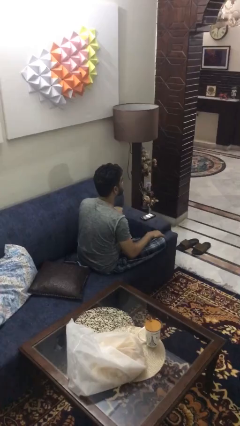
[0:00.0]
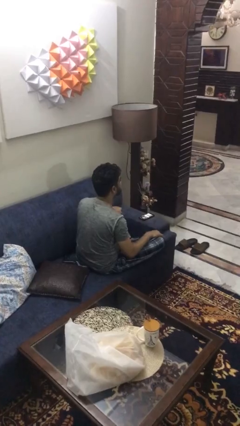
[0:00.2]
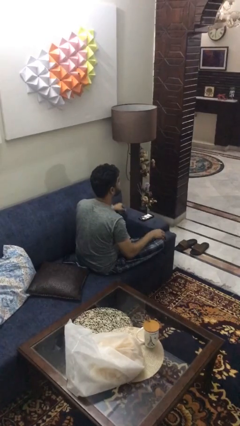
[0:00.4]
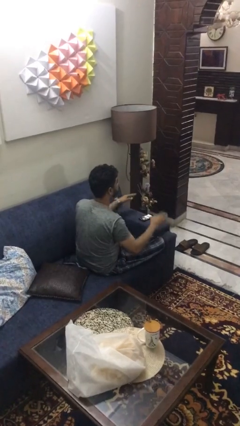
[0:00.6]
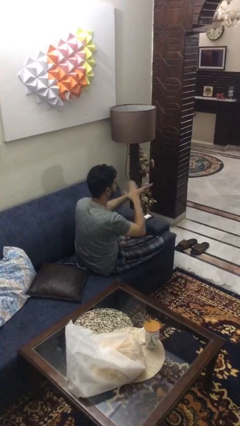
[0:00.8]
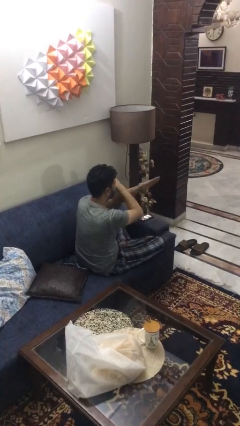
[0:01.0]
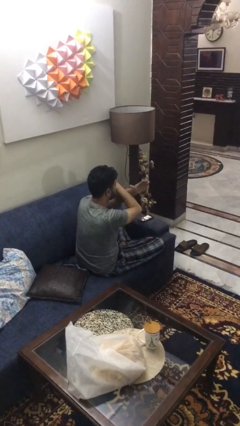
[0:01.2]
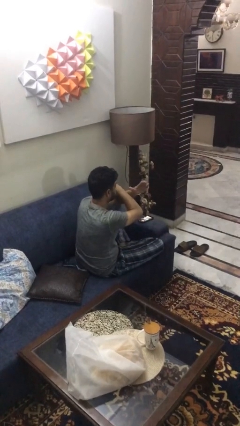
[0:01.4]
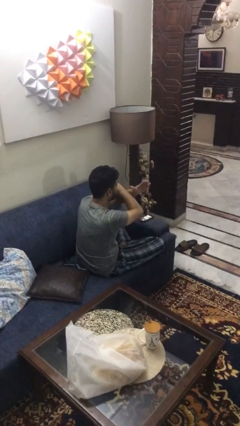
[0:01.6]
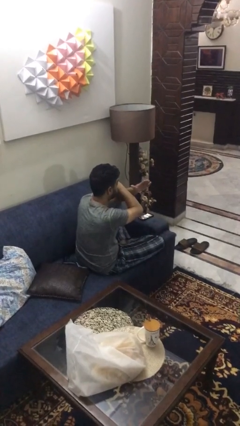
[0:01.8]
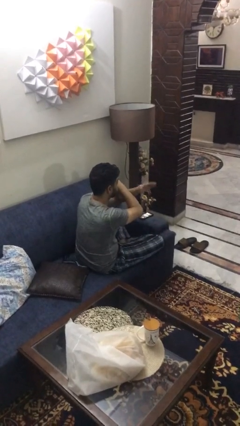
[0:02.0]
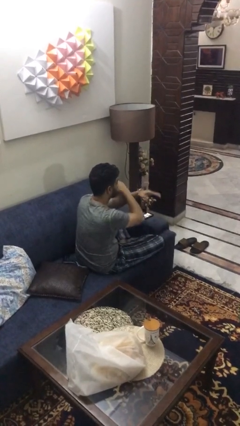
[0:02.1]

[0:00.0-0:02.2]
person gestures arms x

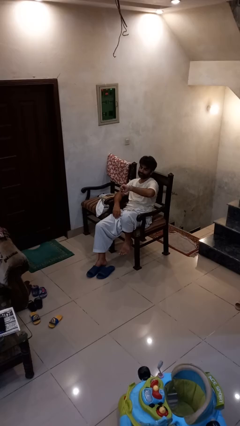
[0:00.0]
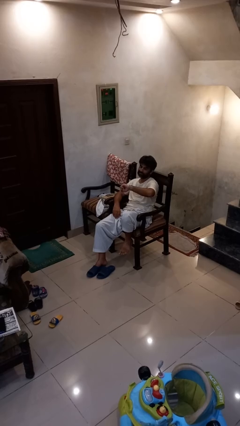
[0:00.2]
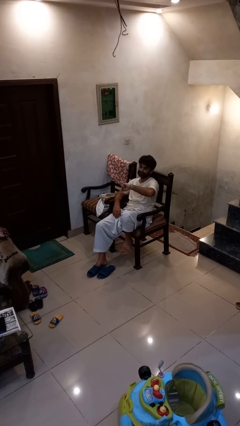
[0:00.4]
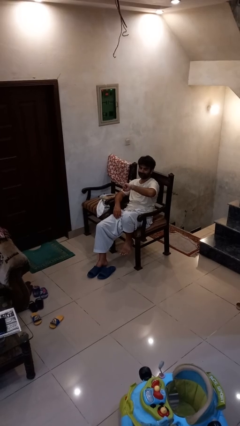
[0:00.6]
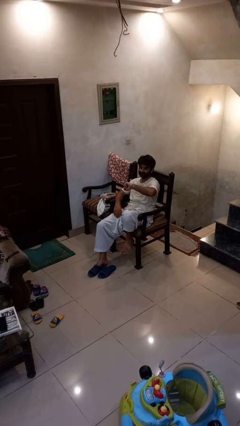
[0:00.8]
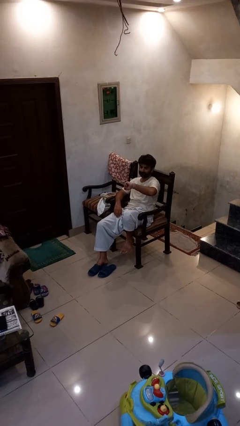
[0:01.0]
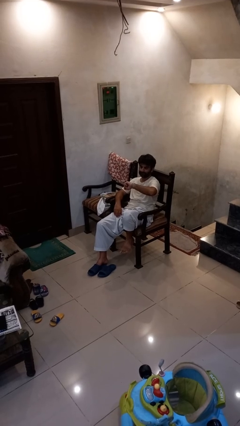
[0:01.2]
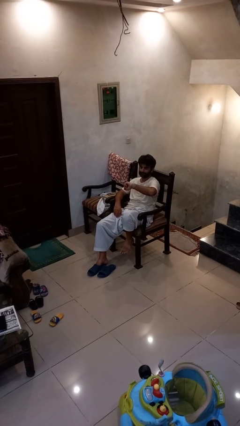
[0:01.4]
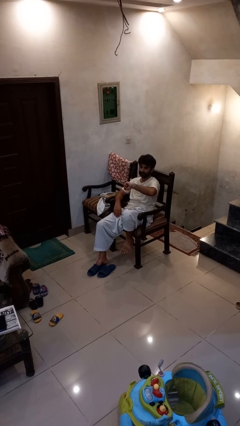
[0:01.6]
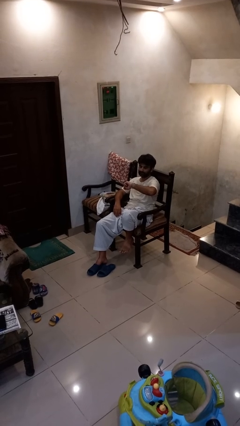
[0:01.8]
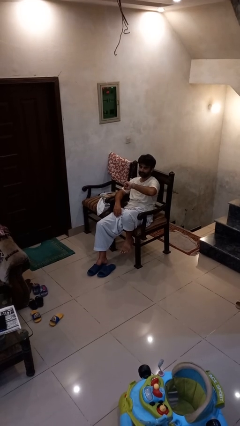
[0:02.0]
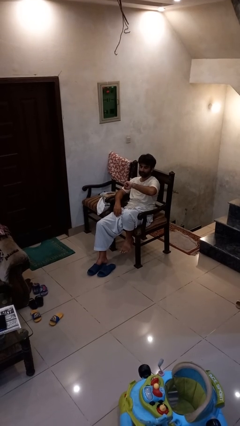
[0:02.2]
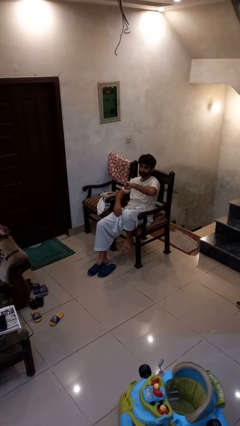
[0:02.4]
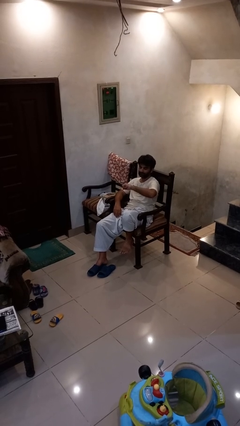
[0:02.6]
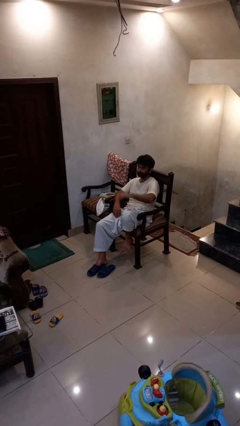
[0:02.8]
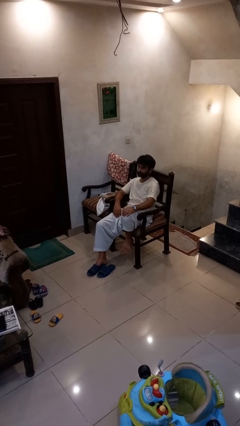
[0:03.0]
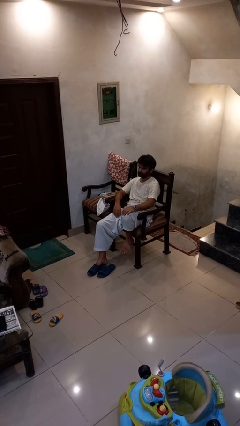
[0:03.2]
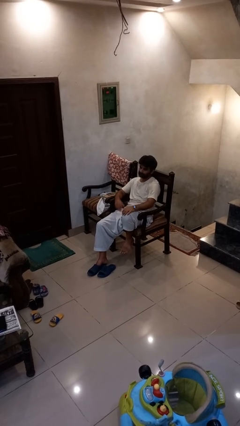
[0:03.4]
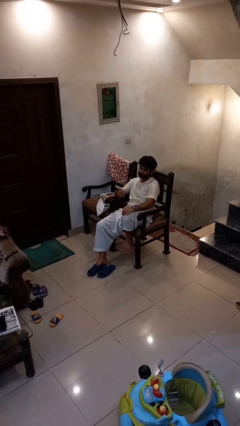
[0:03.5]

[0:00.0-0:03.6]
person looks at wristwatch

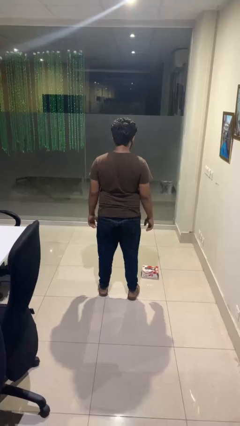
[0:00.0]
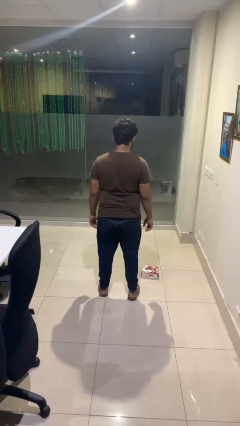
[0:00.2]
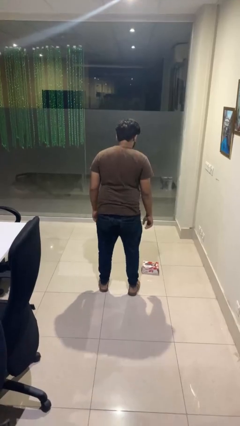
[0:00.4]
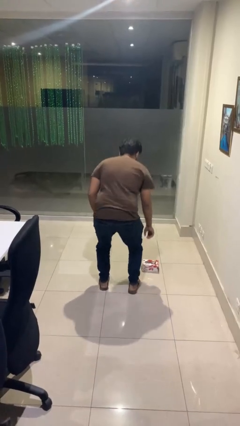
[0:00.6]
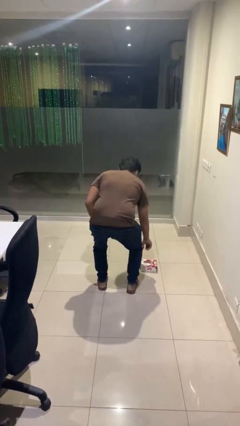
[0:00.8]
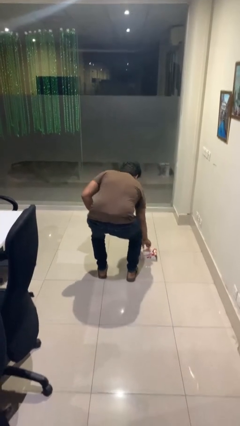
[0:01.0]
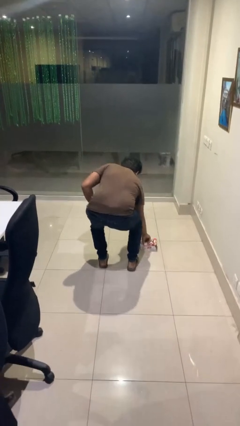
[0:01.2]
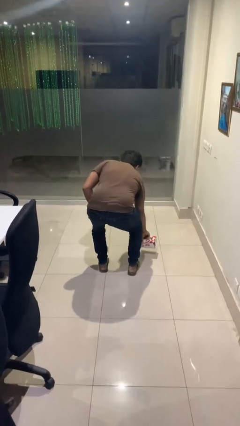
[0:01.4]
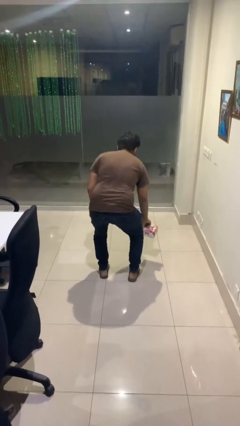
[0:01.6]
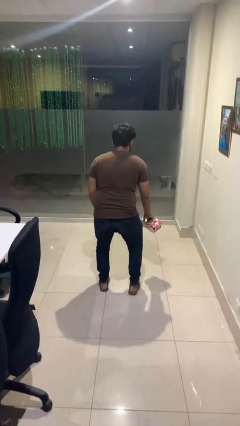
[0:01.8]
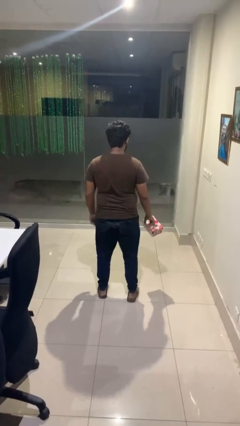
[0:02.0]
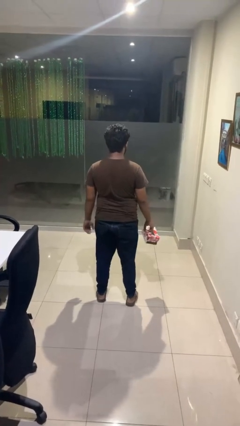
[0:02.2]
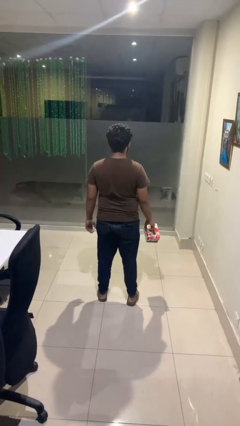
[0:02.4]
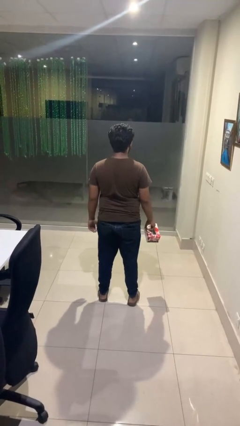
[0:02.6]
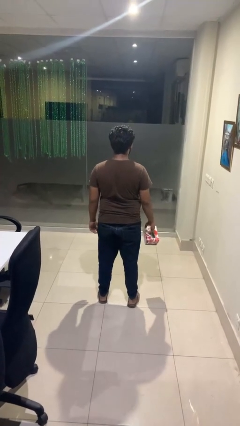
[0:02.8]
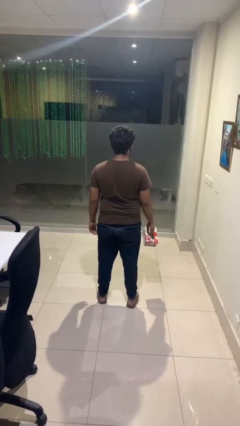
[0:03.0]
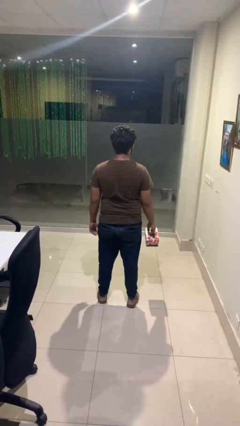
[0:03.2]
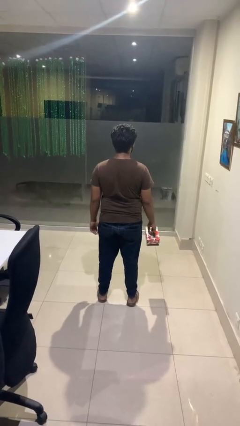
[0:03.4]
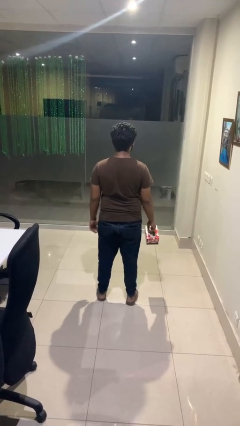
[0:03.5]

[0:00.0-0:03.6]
person picks up object from floor

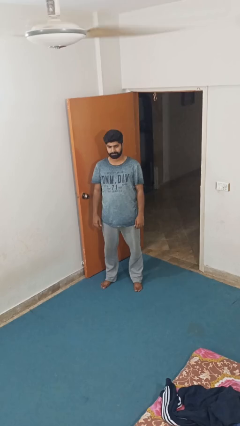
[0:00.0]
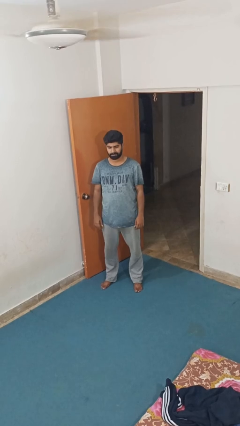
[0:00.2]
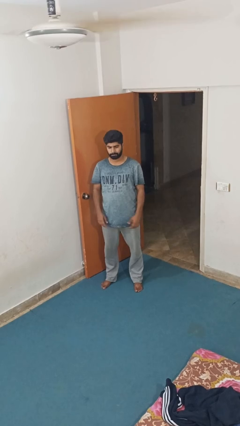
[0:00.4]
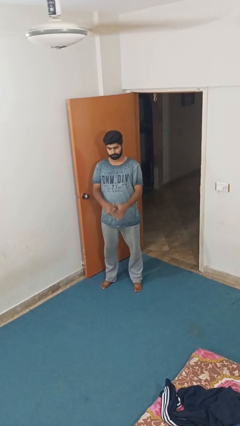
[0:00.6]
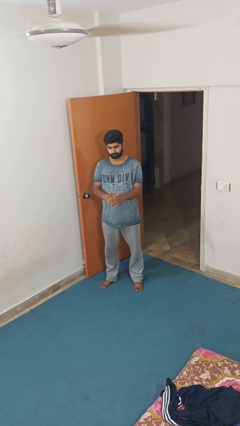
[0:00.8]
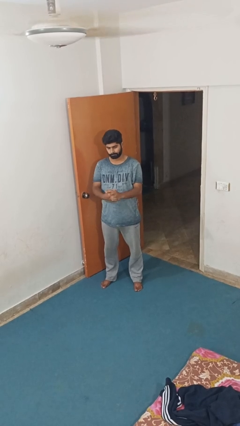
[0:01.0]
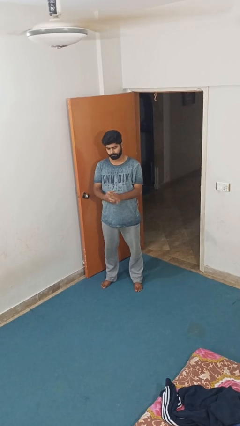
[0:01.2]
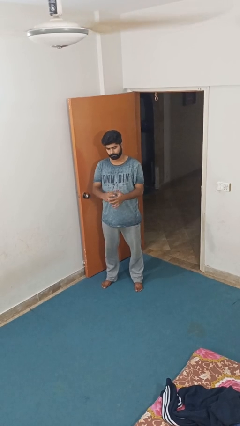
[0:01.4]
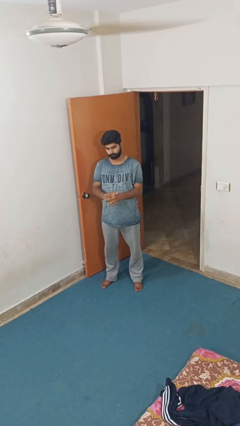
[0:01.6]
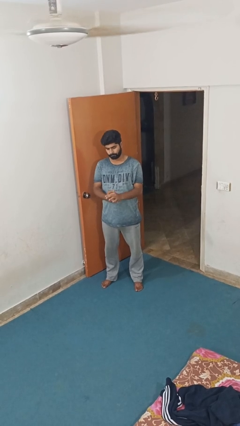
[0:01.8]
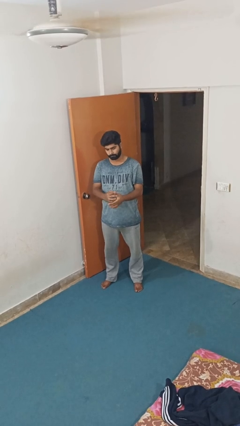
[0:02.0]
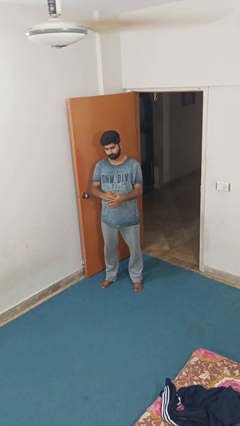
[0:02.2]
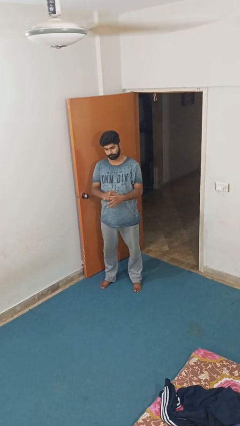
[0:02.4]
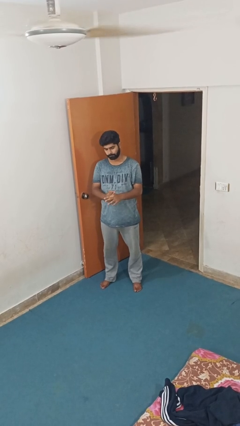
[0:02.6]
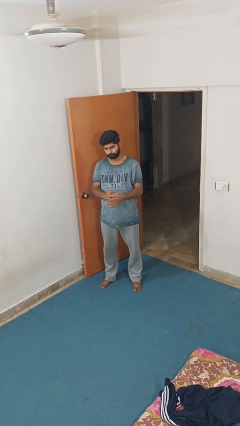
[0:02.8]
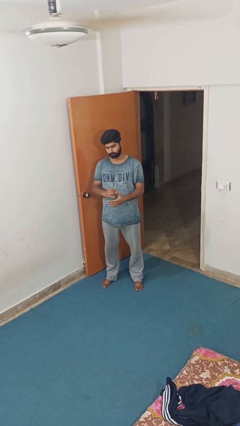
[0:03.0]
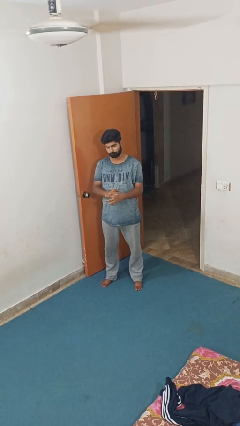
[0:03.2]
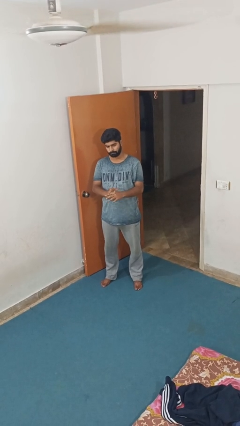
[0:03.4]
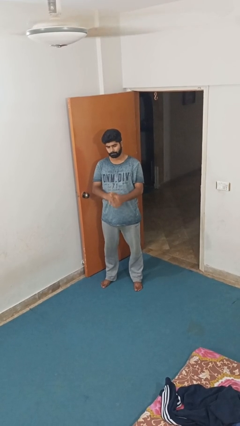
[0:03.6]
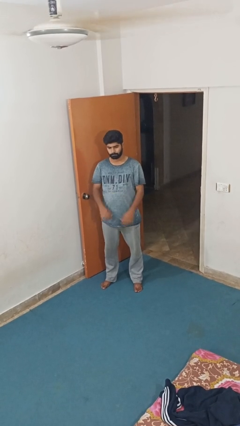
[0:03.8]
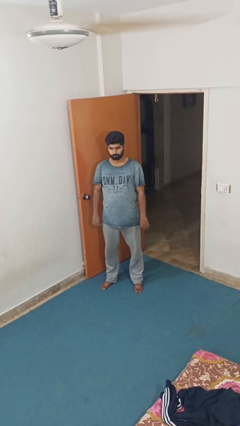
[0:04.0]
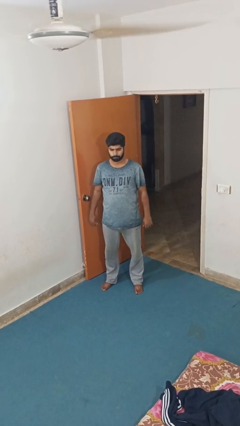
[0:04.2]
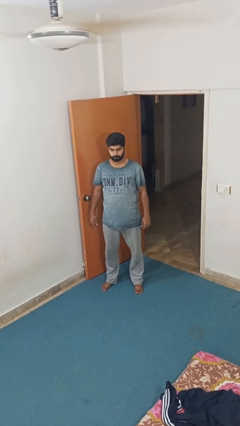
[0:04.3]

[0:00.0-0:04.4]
person snaps fingers

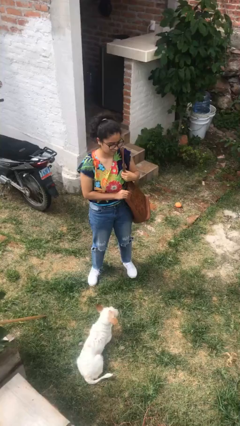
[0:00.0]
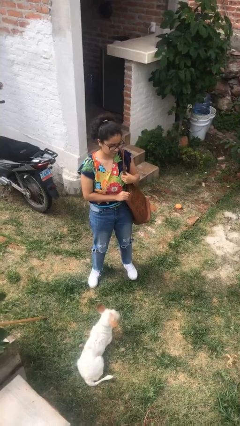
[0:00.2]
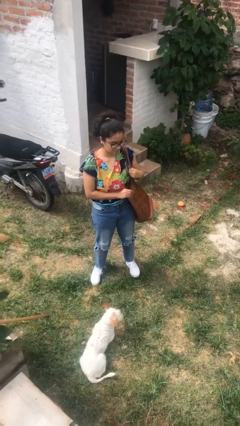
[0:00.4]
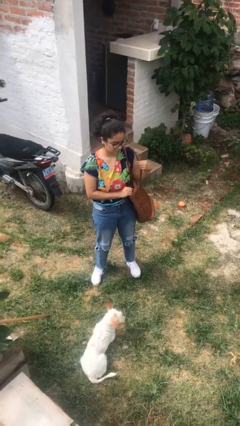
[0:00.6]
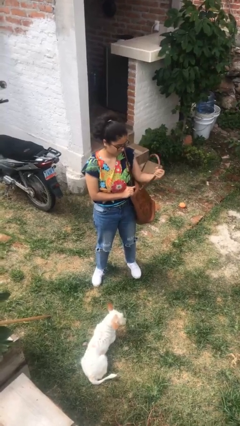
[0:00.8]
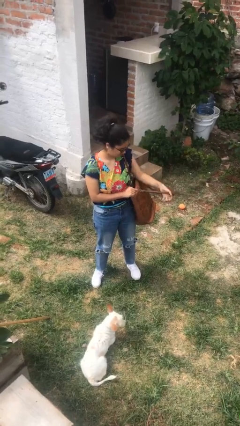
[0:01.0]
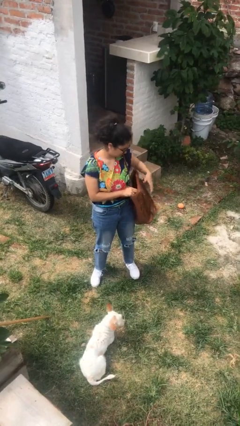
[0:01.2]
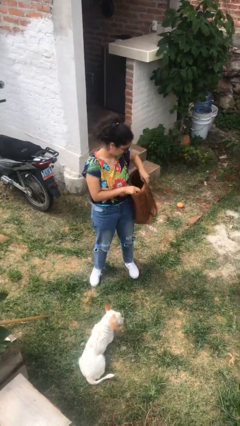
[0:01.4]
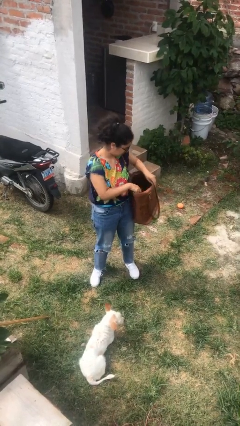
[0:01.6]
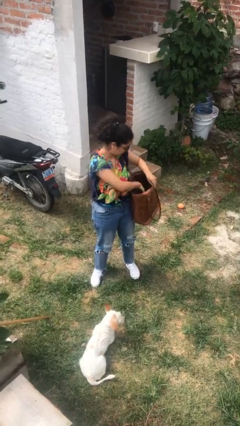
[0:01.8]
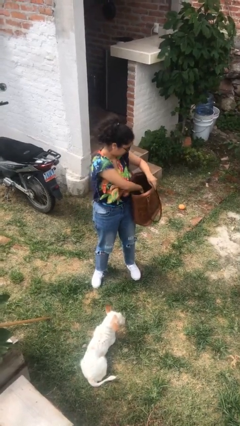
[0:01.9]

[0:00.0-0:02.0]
person searches in purse

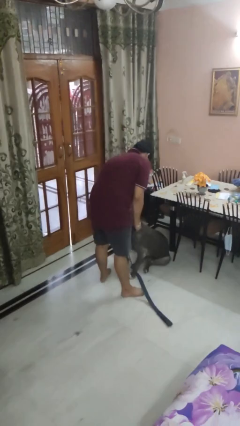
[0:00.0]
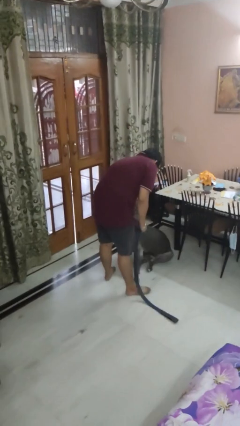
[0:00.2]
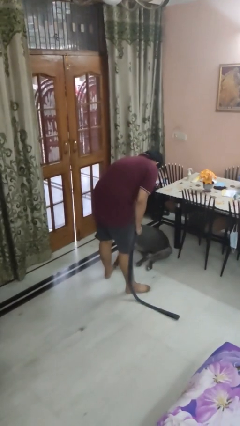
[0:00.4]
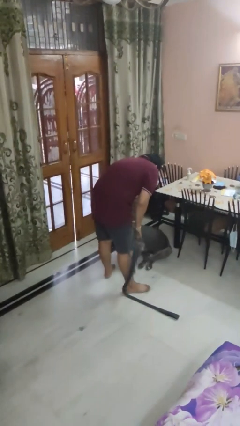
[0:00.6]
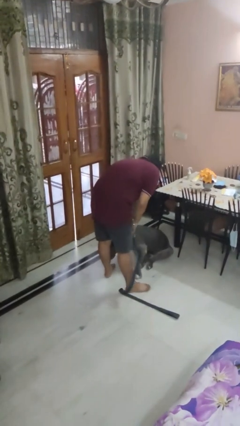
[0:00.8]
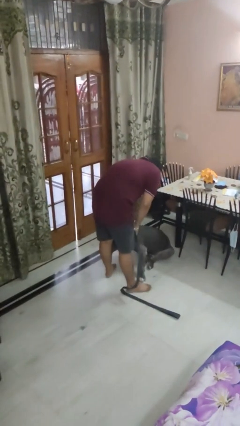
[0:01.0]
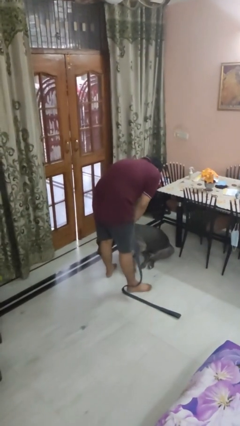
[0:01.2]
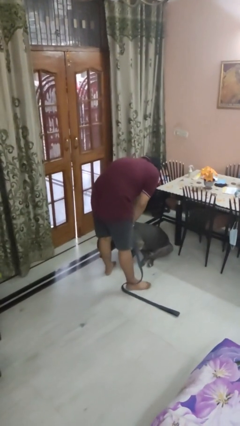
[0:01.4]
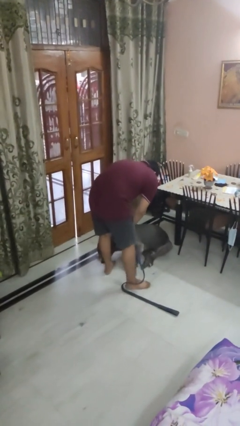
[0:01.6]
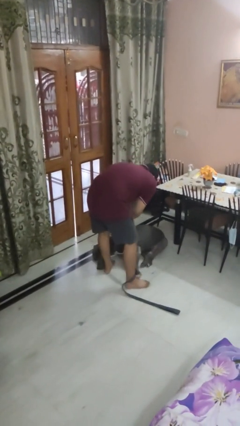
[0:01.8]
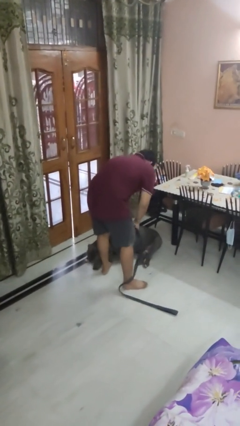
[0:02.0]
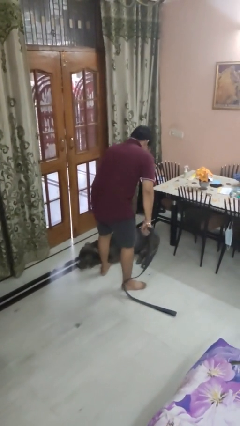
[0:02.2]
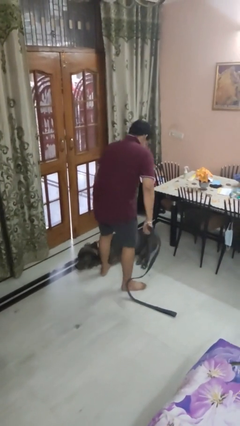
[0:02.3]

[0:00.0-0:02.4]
person unattaches leash from dog
